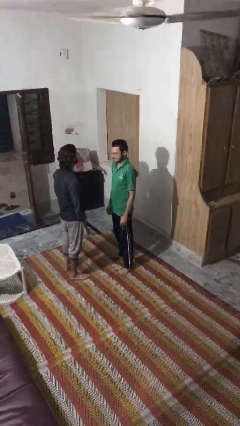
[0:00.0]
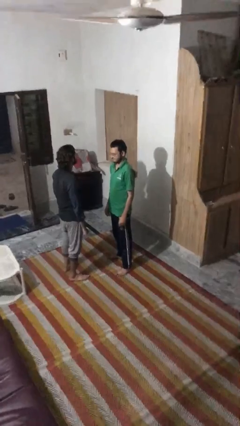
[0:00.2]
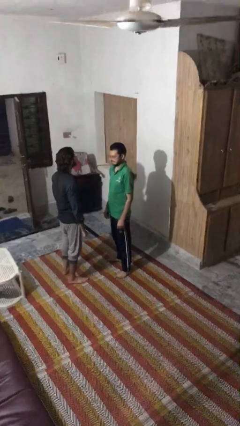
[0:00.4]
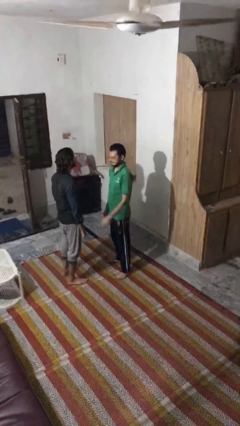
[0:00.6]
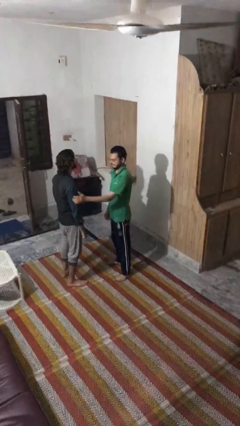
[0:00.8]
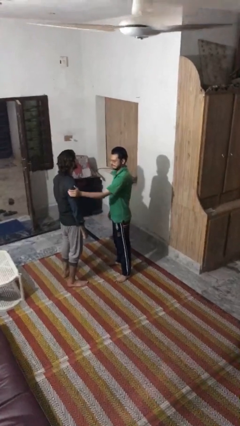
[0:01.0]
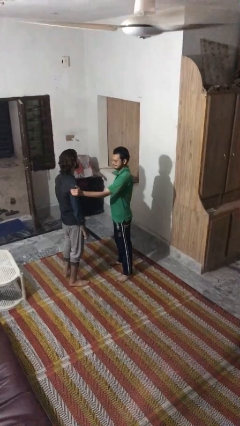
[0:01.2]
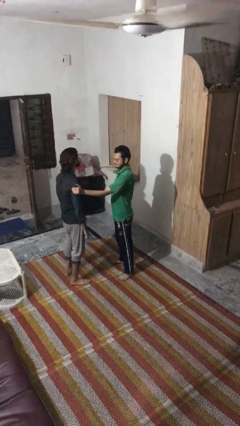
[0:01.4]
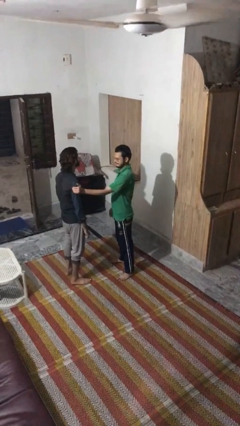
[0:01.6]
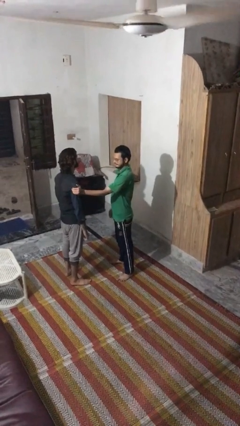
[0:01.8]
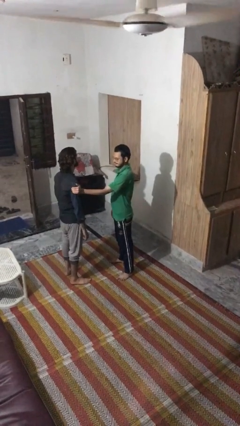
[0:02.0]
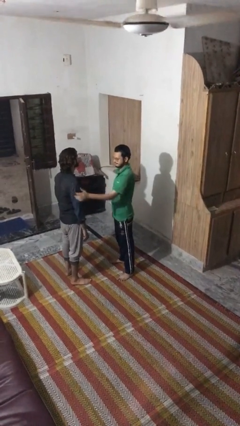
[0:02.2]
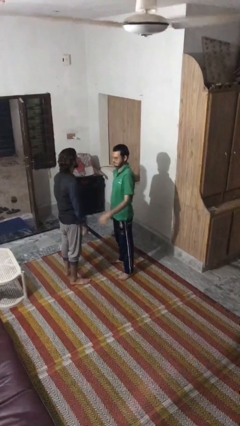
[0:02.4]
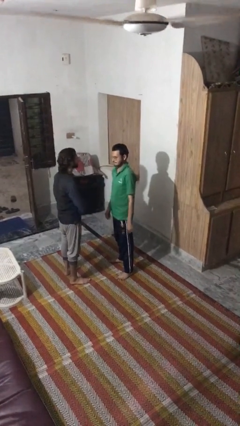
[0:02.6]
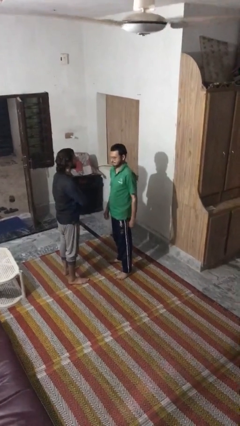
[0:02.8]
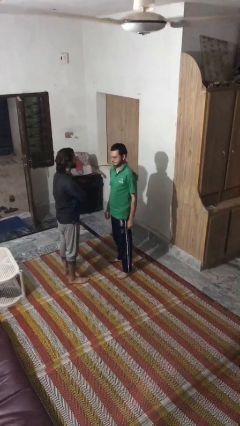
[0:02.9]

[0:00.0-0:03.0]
person grabs person by bicep

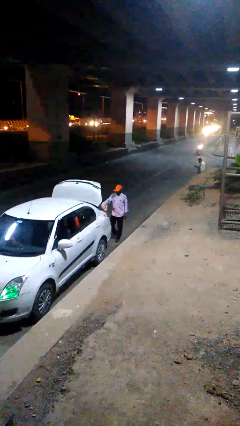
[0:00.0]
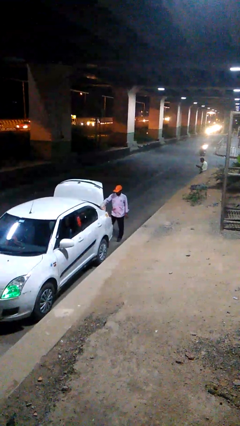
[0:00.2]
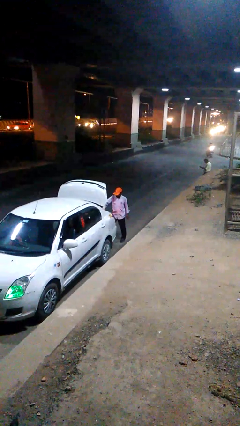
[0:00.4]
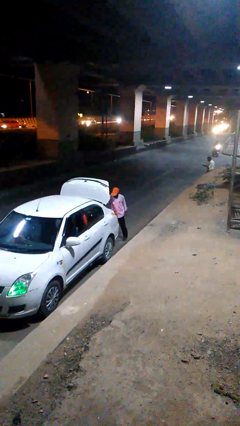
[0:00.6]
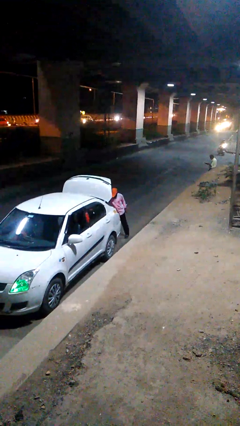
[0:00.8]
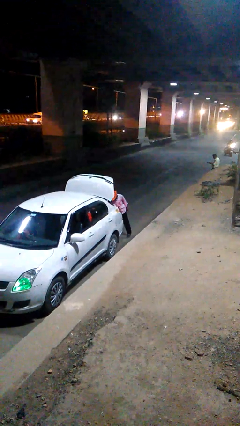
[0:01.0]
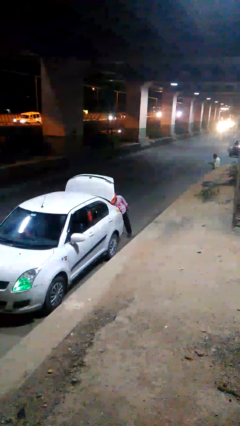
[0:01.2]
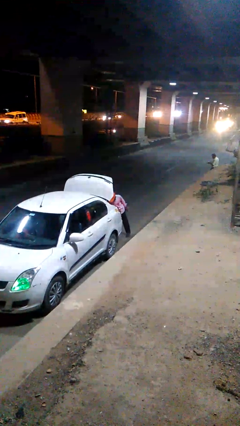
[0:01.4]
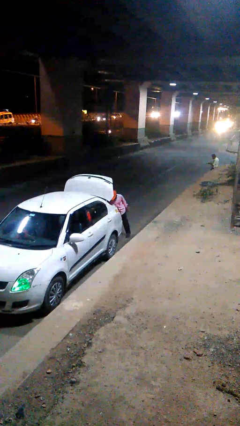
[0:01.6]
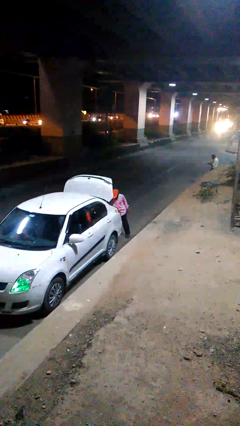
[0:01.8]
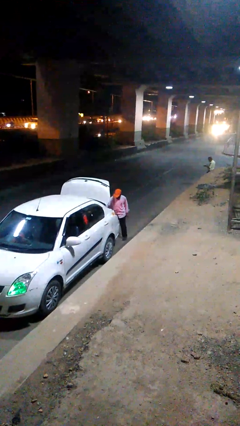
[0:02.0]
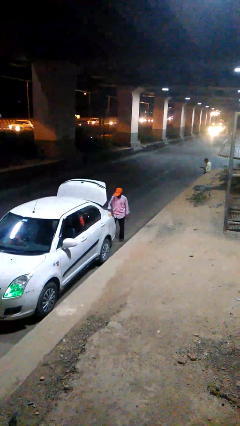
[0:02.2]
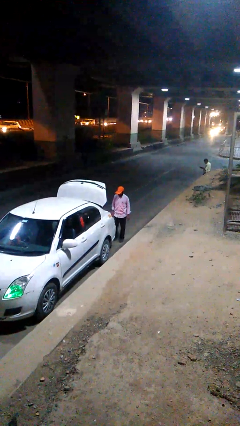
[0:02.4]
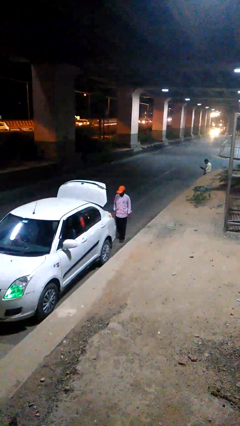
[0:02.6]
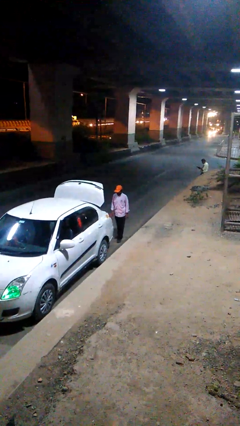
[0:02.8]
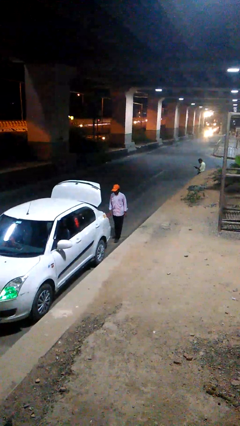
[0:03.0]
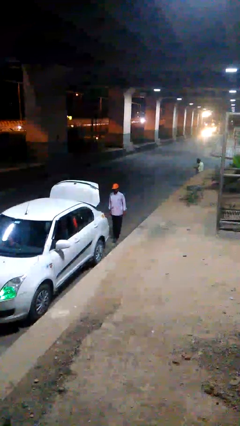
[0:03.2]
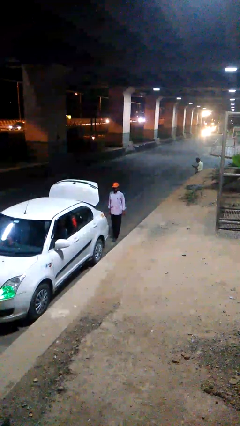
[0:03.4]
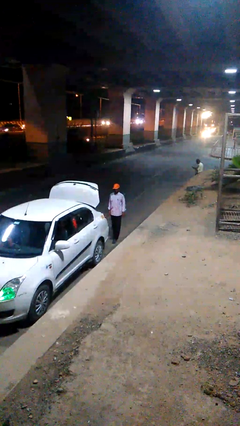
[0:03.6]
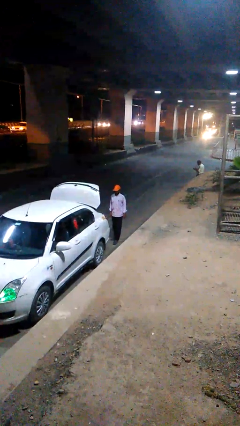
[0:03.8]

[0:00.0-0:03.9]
person loads car

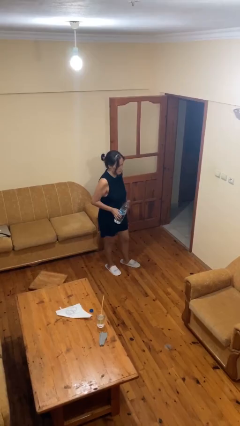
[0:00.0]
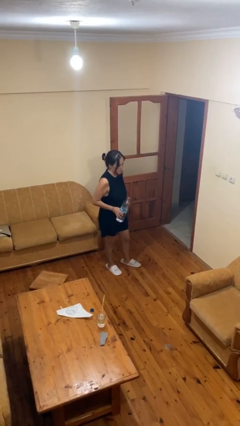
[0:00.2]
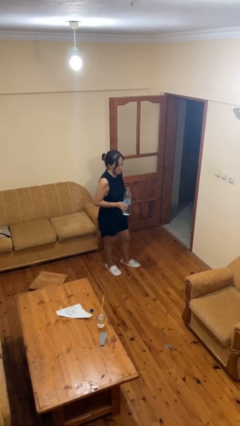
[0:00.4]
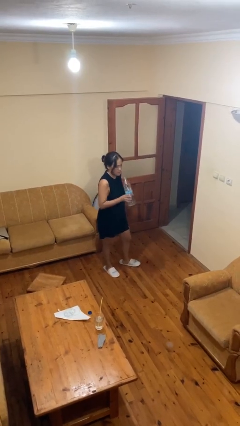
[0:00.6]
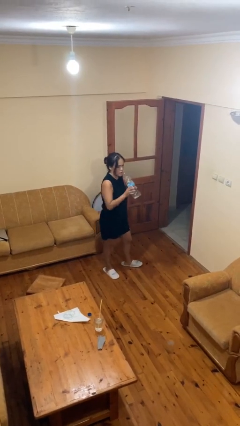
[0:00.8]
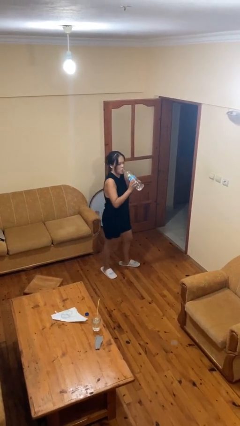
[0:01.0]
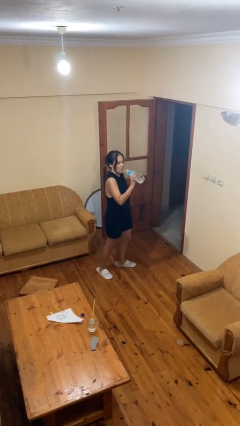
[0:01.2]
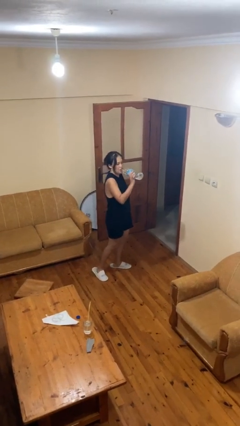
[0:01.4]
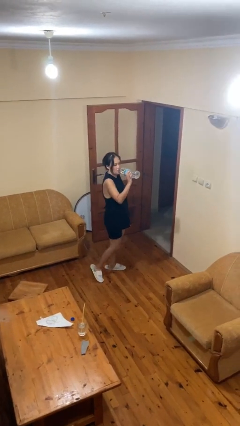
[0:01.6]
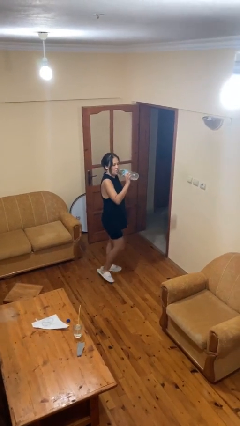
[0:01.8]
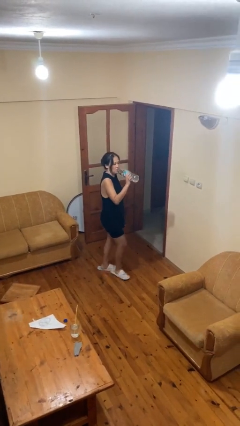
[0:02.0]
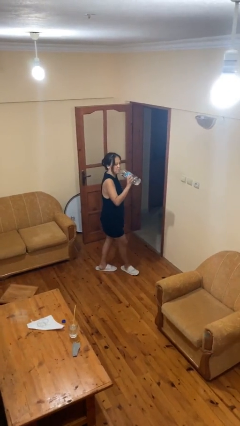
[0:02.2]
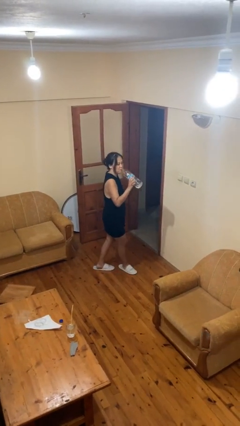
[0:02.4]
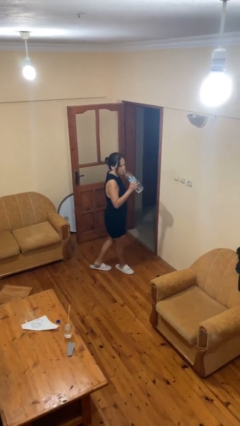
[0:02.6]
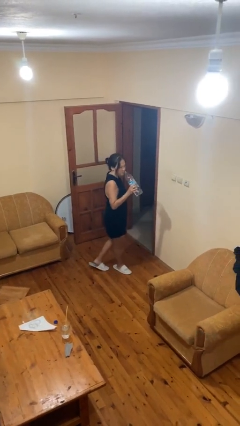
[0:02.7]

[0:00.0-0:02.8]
person drinks from bottle

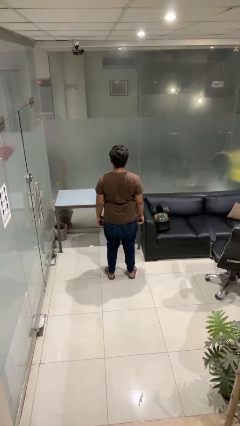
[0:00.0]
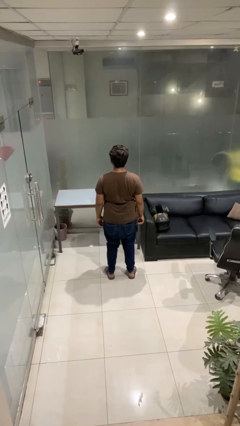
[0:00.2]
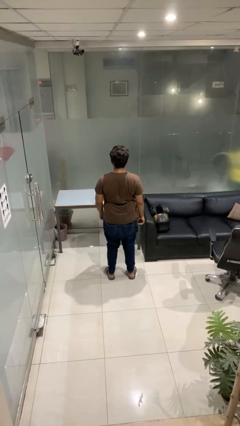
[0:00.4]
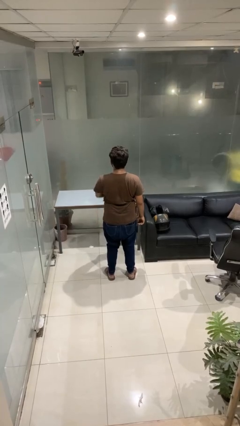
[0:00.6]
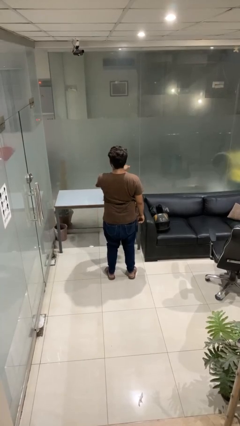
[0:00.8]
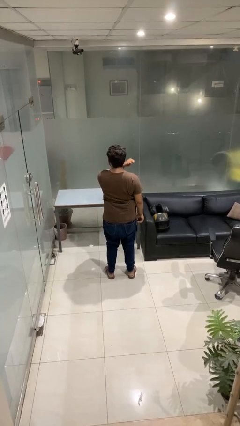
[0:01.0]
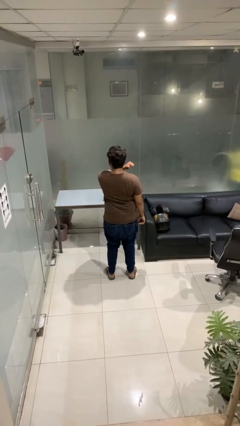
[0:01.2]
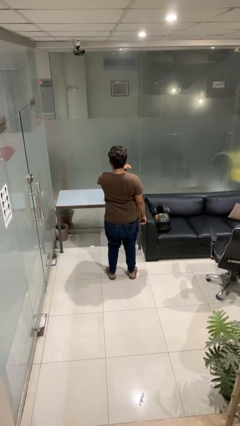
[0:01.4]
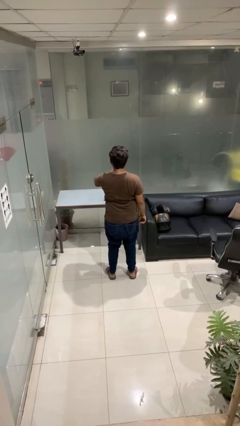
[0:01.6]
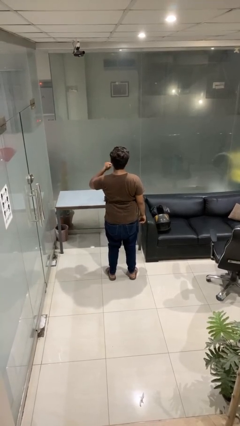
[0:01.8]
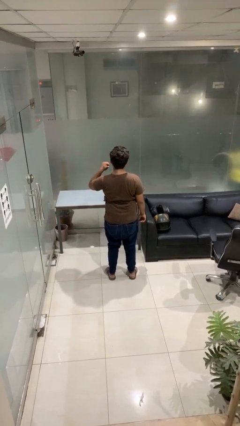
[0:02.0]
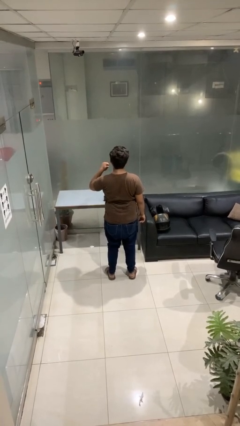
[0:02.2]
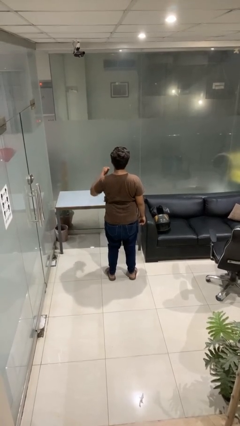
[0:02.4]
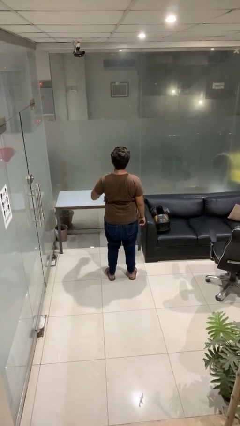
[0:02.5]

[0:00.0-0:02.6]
person gestures cut

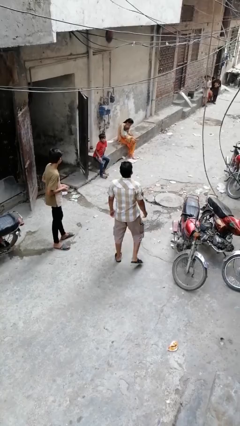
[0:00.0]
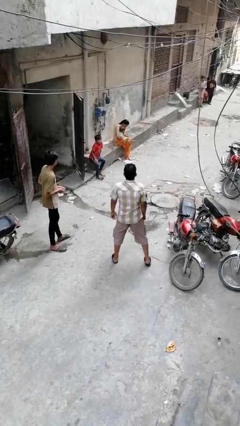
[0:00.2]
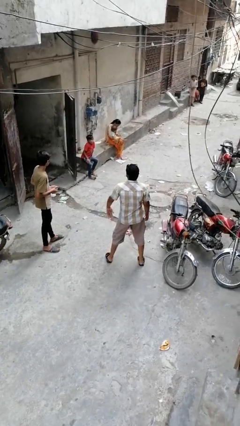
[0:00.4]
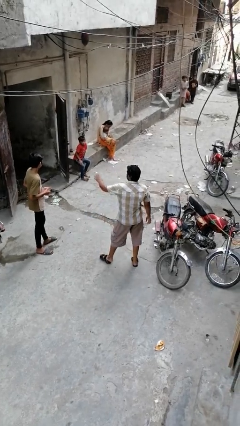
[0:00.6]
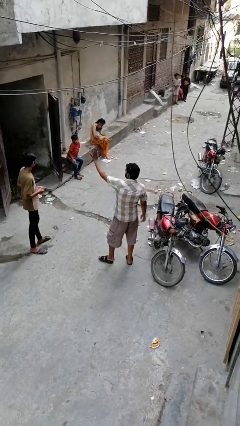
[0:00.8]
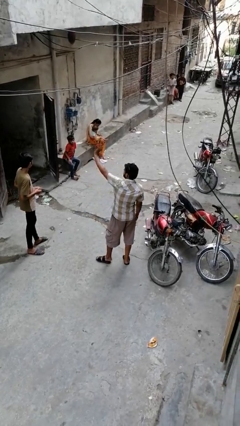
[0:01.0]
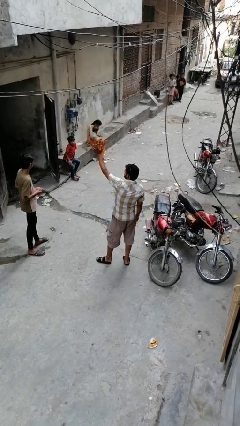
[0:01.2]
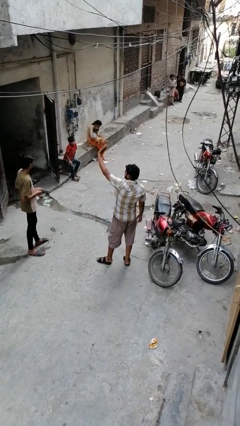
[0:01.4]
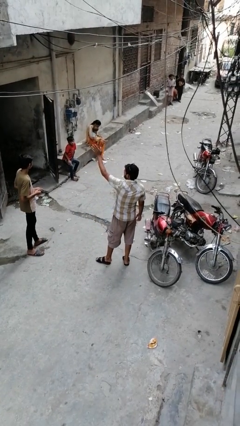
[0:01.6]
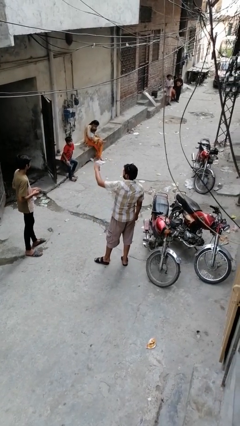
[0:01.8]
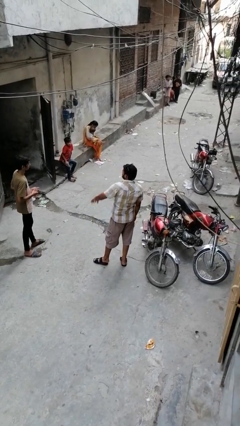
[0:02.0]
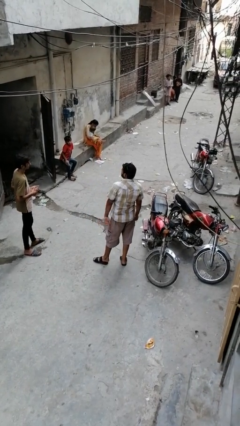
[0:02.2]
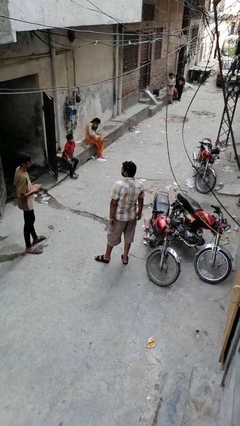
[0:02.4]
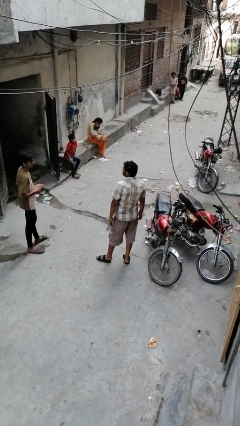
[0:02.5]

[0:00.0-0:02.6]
person waves at person

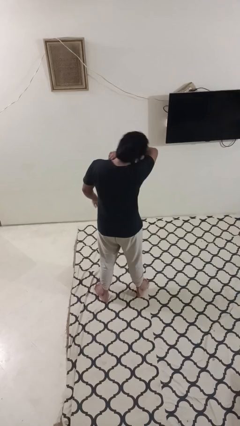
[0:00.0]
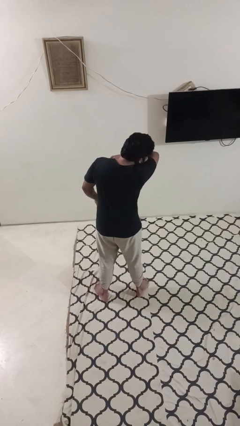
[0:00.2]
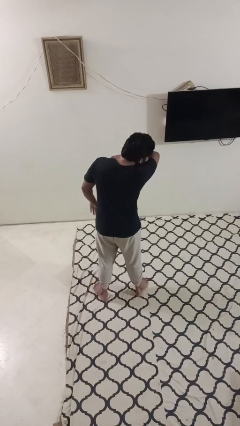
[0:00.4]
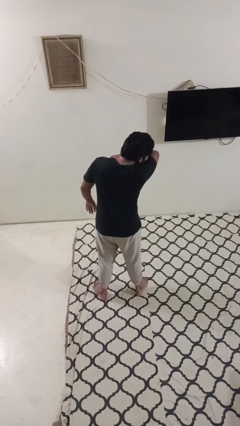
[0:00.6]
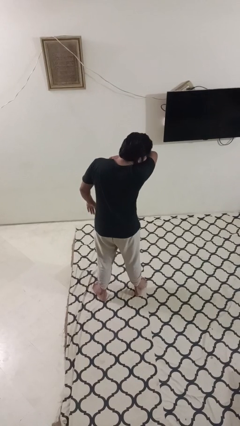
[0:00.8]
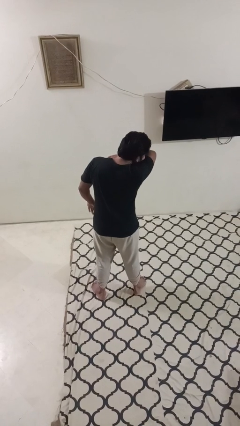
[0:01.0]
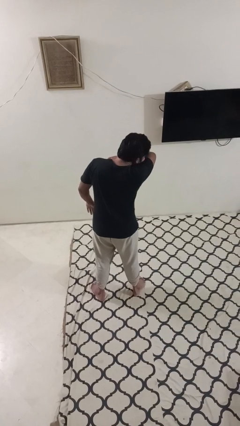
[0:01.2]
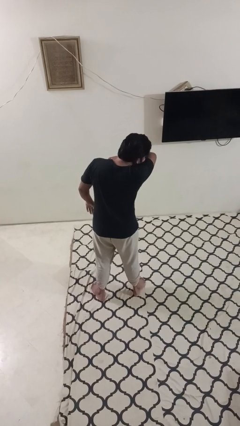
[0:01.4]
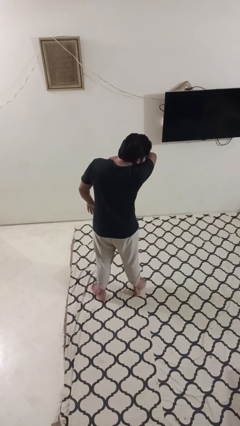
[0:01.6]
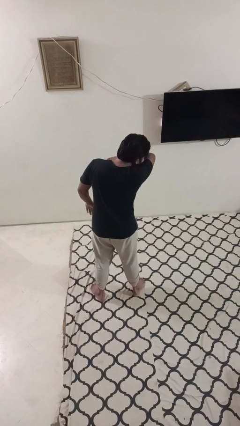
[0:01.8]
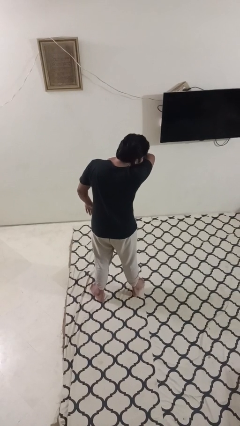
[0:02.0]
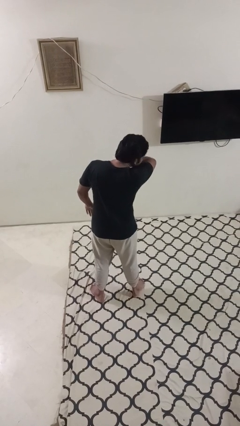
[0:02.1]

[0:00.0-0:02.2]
person sneezes into arm
